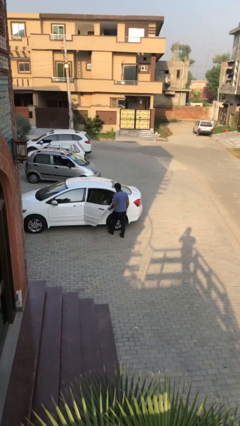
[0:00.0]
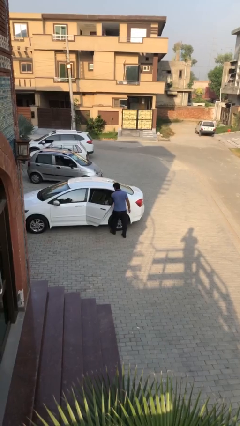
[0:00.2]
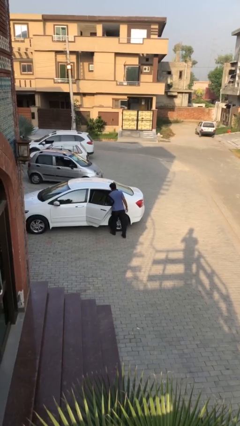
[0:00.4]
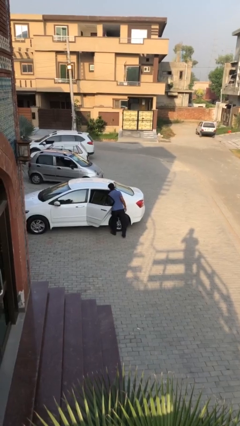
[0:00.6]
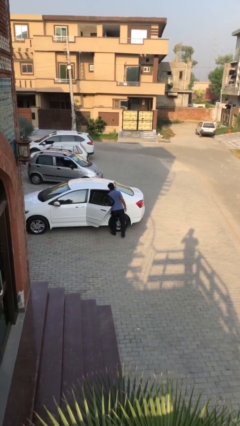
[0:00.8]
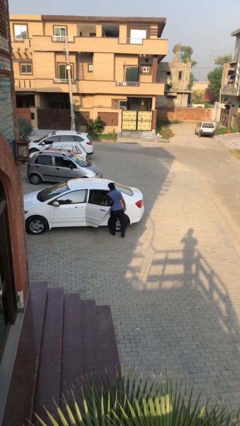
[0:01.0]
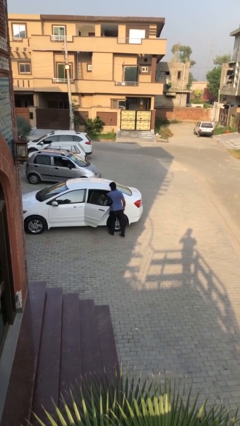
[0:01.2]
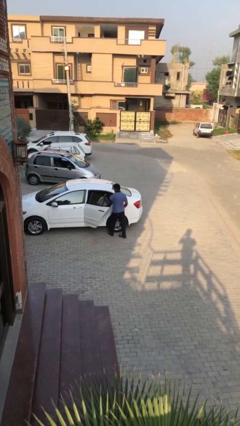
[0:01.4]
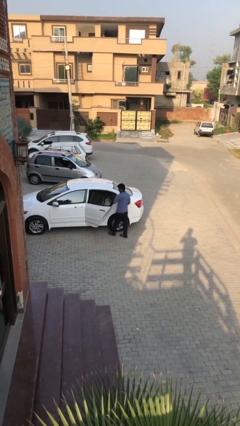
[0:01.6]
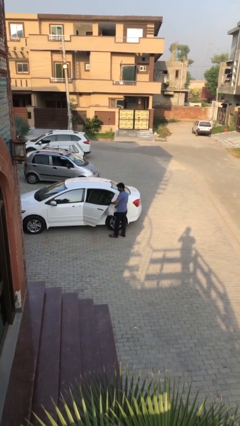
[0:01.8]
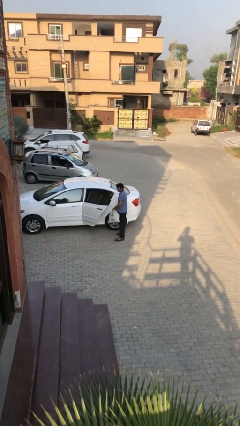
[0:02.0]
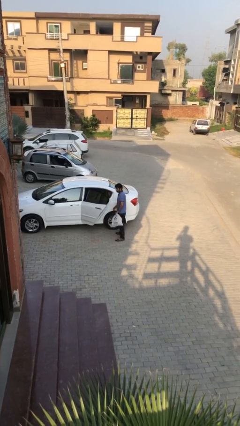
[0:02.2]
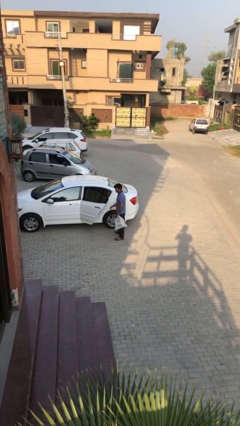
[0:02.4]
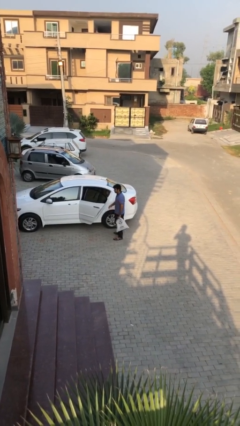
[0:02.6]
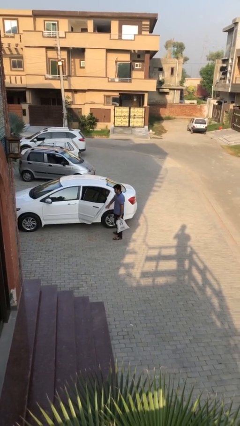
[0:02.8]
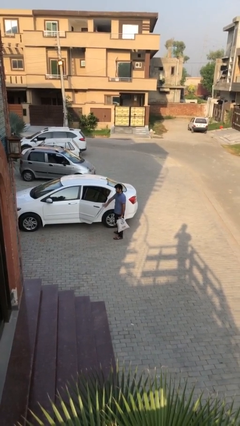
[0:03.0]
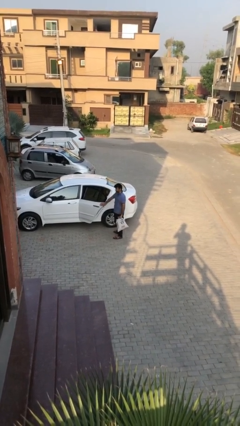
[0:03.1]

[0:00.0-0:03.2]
person unloads car

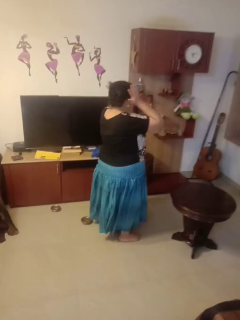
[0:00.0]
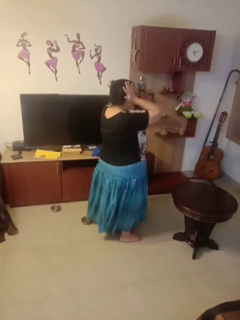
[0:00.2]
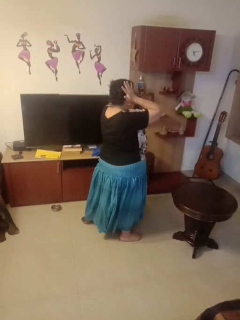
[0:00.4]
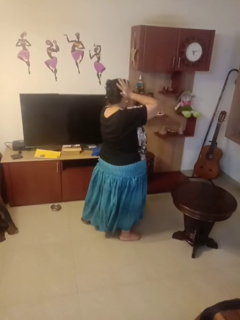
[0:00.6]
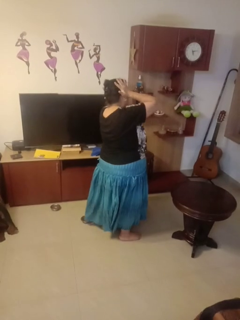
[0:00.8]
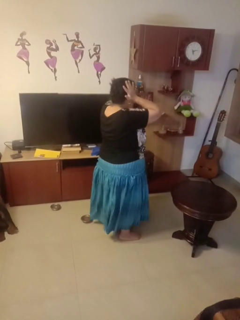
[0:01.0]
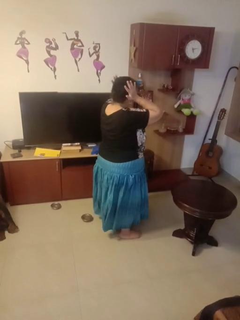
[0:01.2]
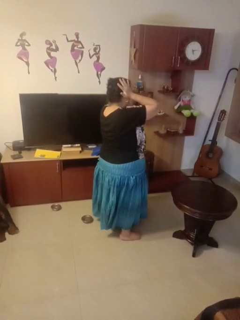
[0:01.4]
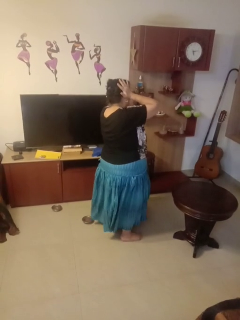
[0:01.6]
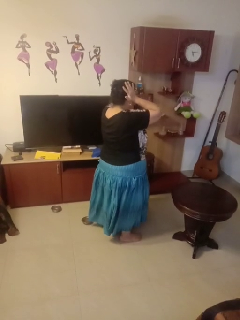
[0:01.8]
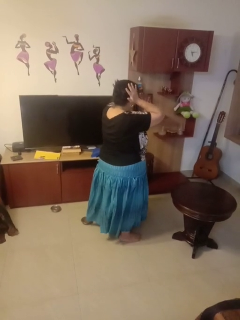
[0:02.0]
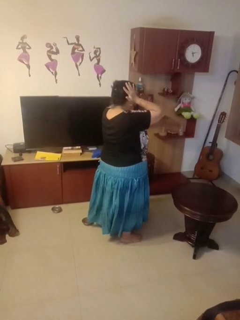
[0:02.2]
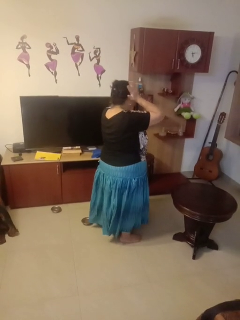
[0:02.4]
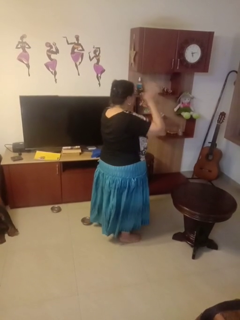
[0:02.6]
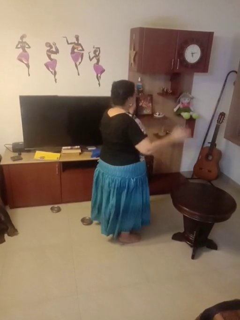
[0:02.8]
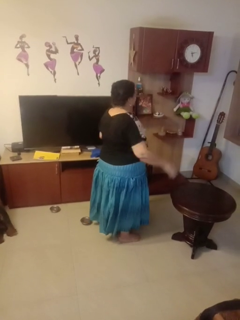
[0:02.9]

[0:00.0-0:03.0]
person puts fingers in ear

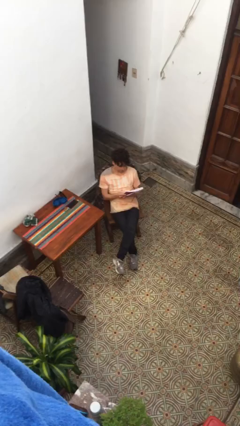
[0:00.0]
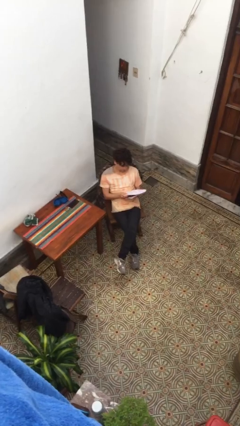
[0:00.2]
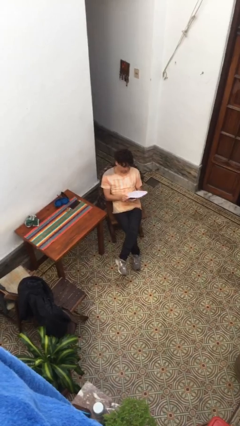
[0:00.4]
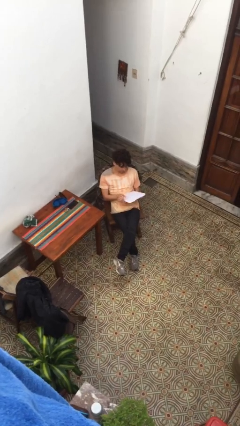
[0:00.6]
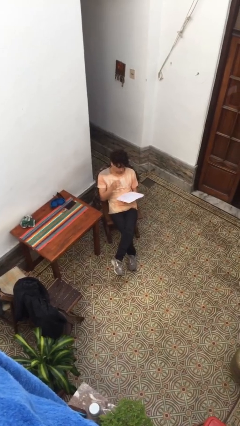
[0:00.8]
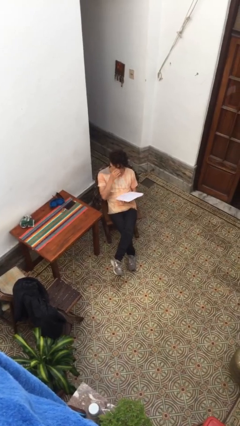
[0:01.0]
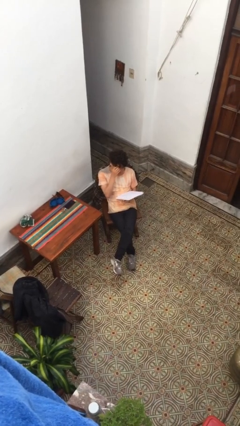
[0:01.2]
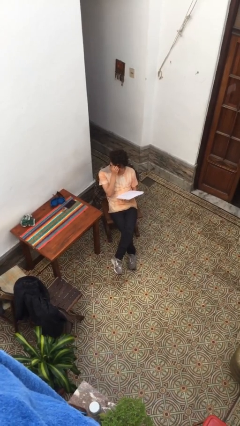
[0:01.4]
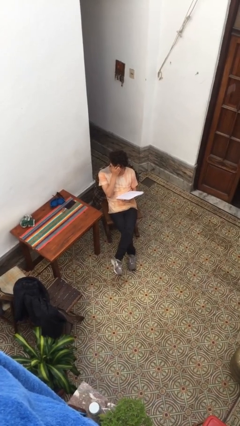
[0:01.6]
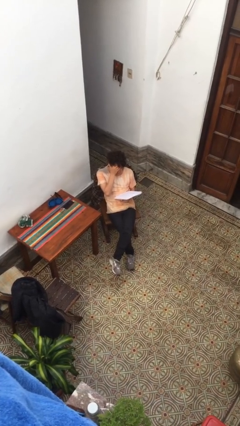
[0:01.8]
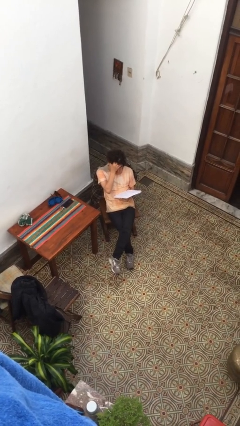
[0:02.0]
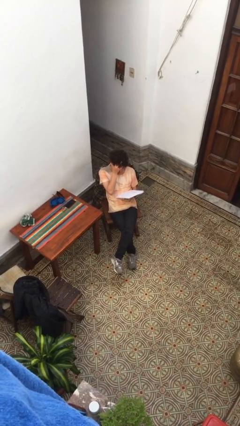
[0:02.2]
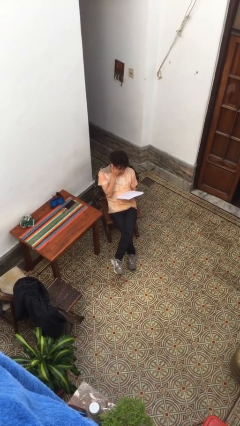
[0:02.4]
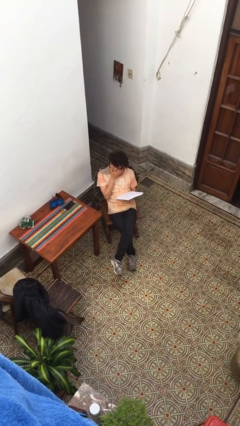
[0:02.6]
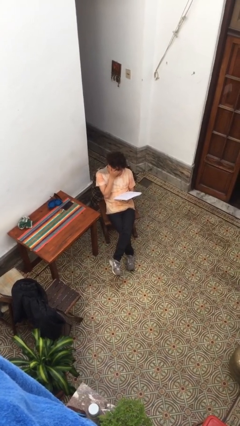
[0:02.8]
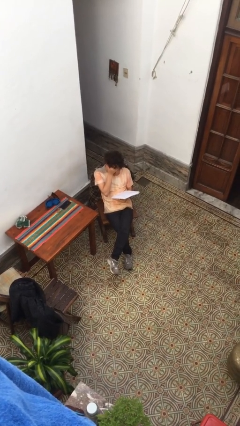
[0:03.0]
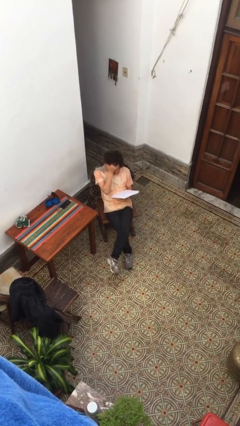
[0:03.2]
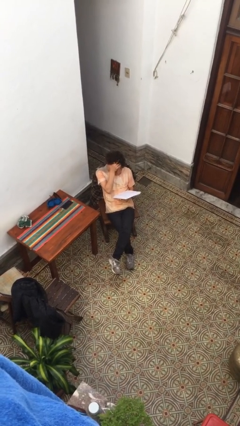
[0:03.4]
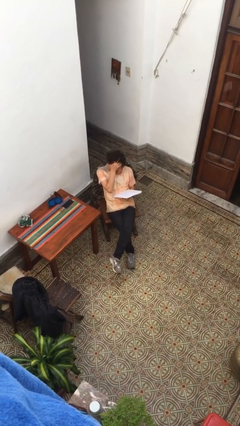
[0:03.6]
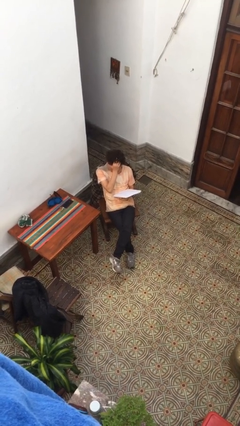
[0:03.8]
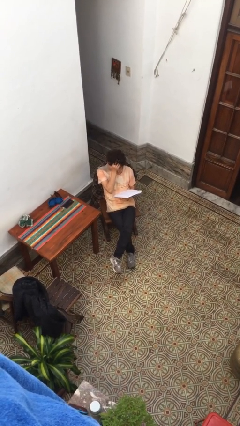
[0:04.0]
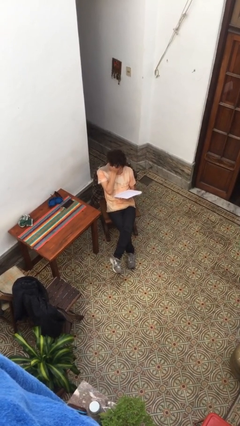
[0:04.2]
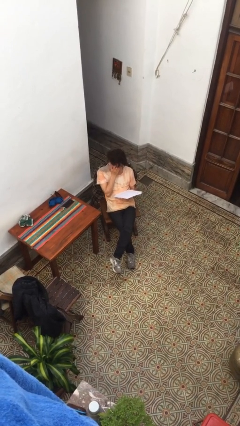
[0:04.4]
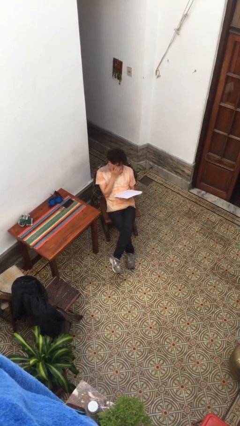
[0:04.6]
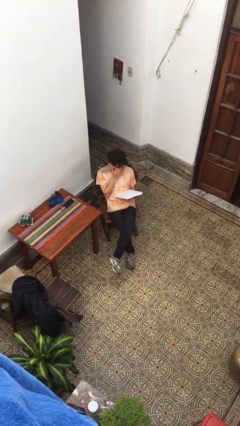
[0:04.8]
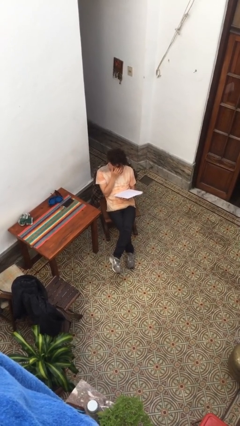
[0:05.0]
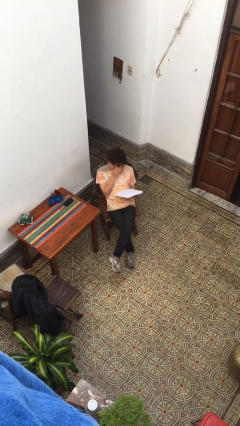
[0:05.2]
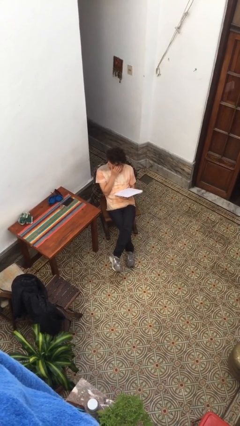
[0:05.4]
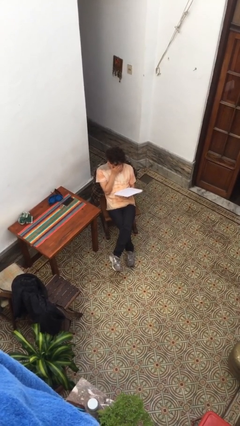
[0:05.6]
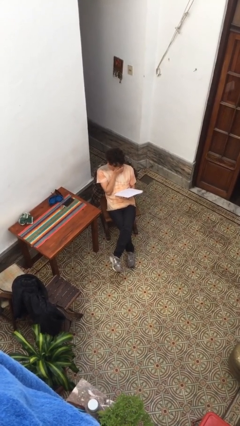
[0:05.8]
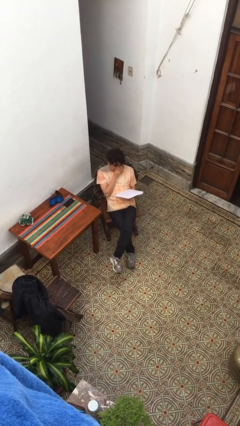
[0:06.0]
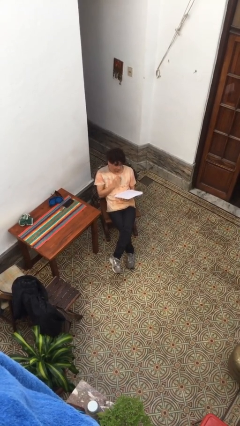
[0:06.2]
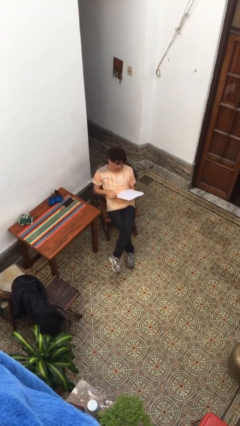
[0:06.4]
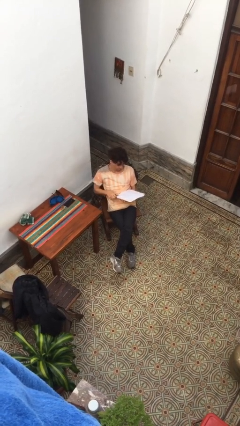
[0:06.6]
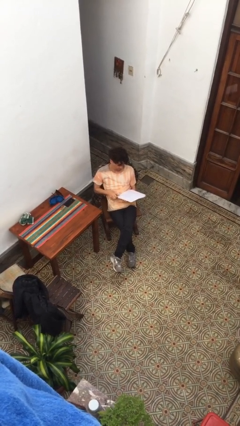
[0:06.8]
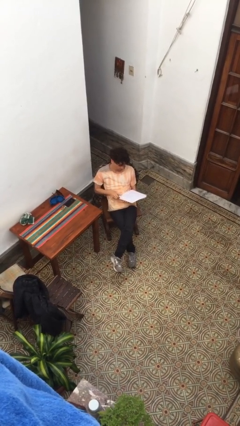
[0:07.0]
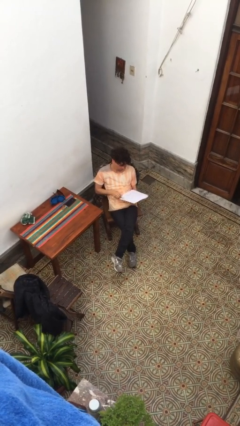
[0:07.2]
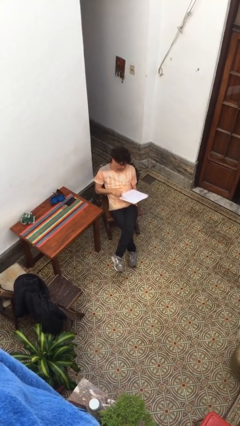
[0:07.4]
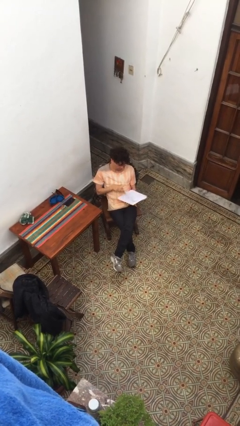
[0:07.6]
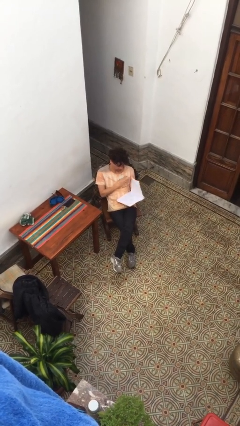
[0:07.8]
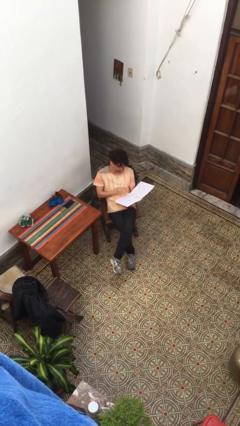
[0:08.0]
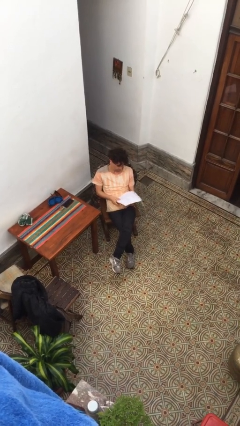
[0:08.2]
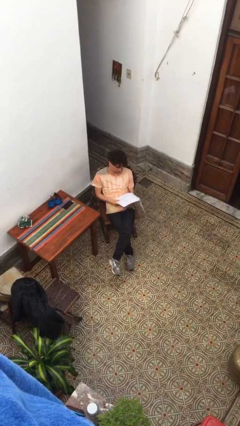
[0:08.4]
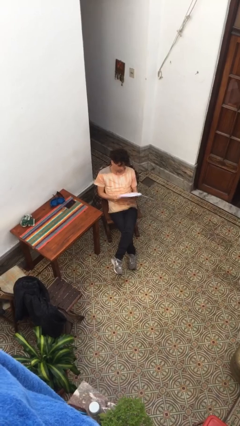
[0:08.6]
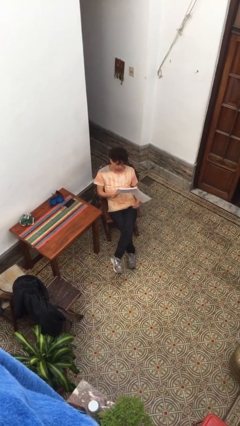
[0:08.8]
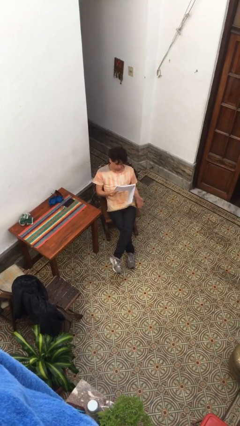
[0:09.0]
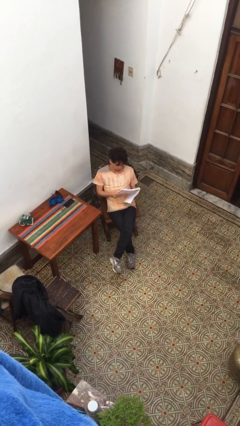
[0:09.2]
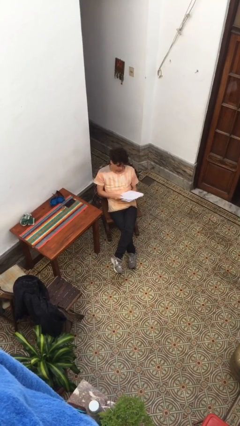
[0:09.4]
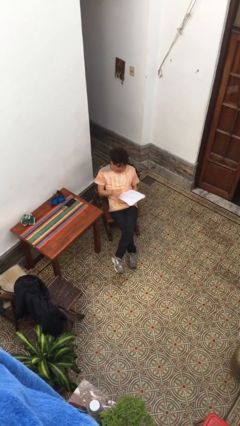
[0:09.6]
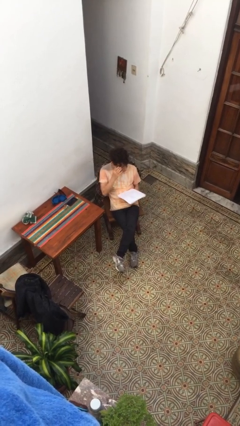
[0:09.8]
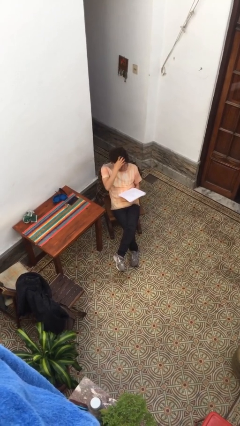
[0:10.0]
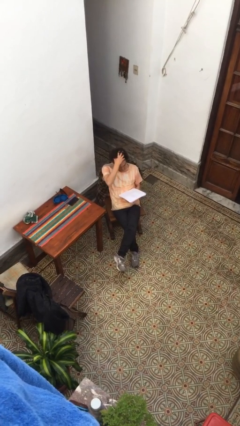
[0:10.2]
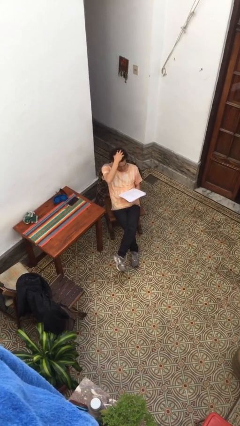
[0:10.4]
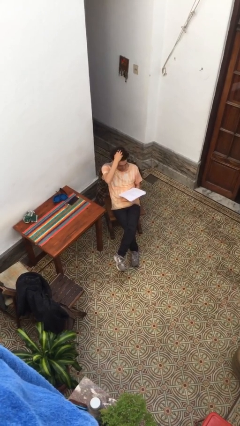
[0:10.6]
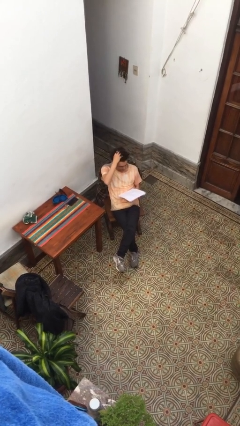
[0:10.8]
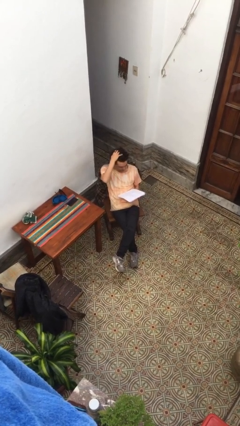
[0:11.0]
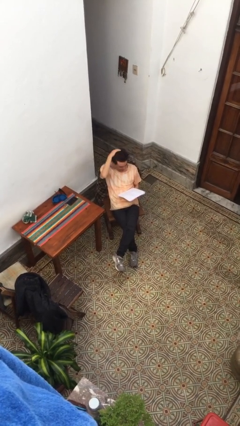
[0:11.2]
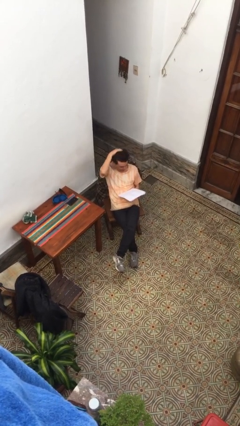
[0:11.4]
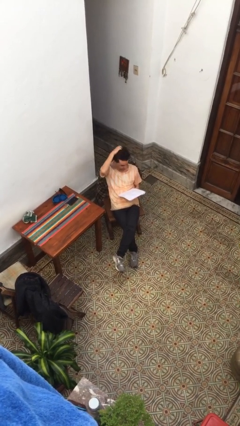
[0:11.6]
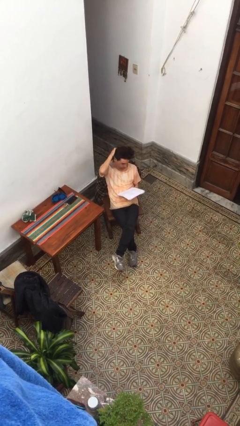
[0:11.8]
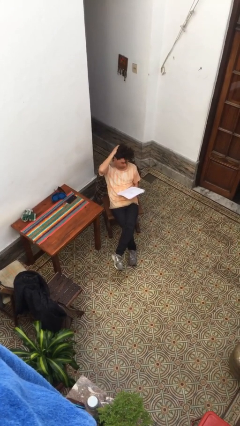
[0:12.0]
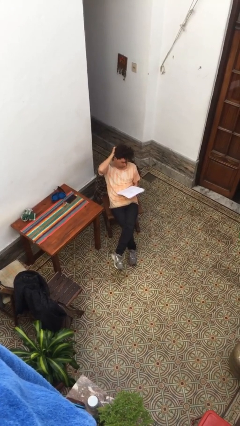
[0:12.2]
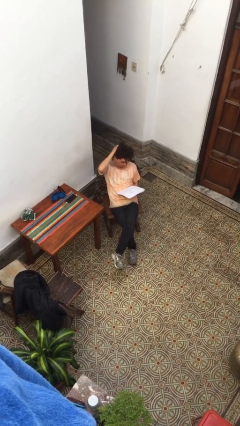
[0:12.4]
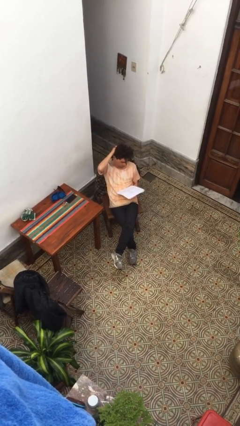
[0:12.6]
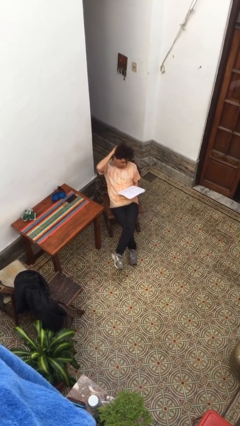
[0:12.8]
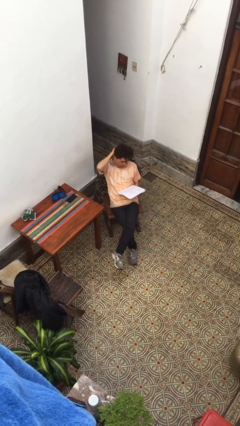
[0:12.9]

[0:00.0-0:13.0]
person reads document
